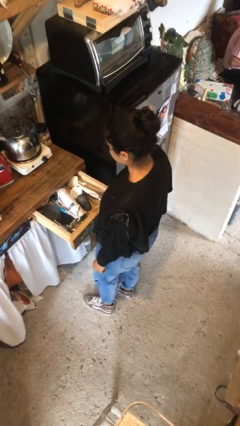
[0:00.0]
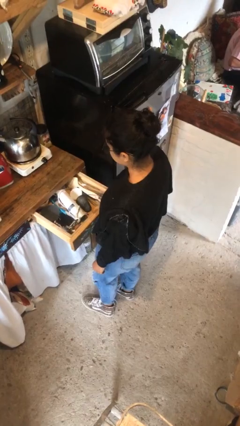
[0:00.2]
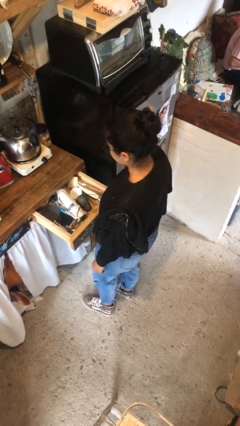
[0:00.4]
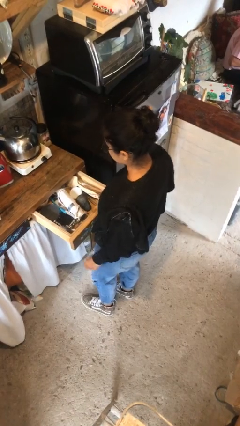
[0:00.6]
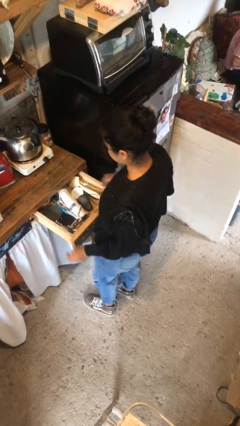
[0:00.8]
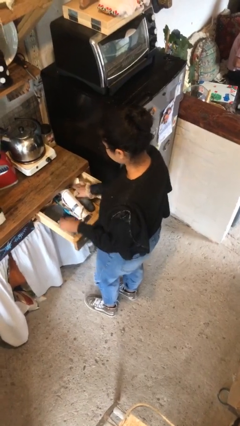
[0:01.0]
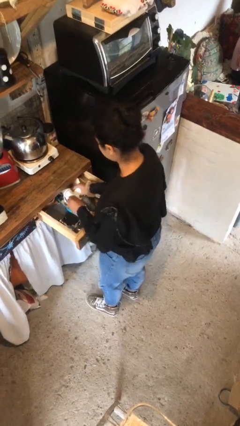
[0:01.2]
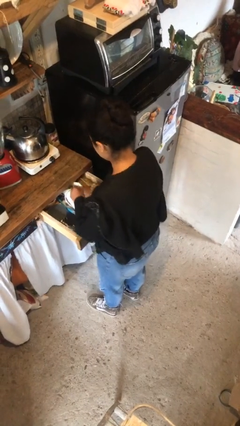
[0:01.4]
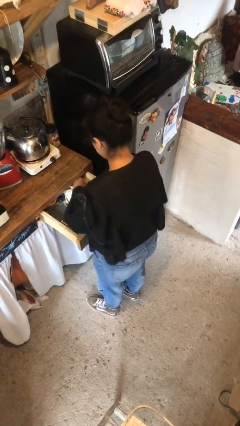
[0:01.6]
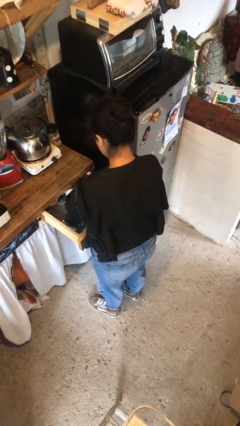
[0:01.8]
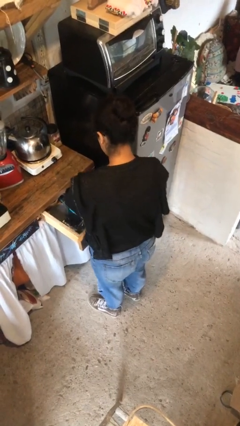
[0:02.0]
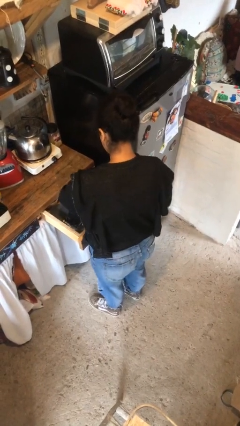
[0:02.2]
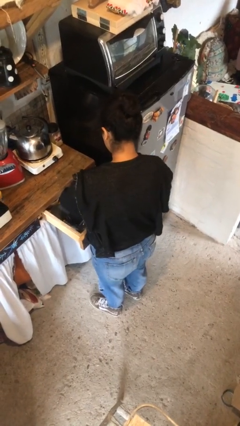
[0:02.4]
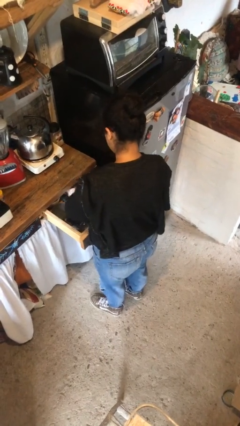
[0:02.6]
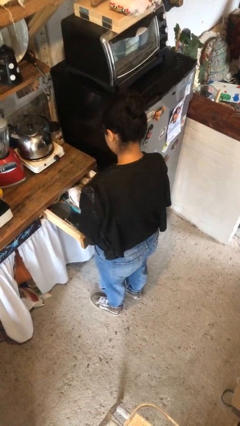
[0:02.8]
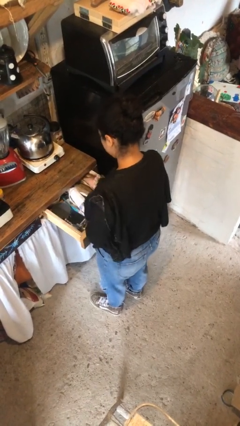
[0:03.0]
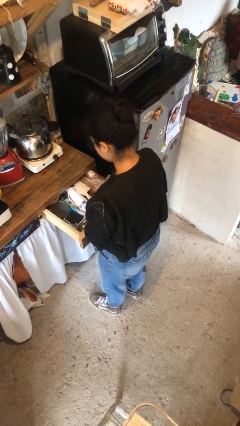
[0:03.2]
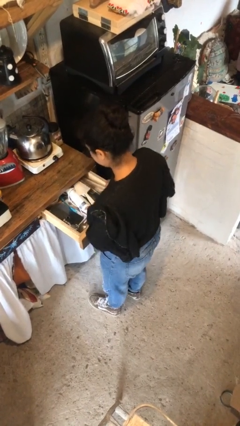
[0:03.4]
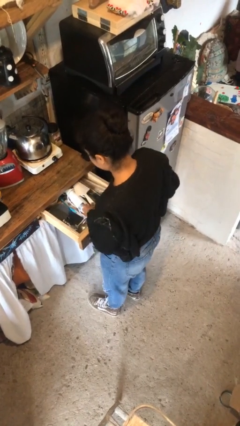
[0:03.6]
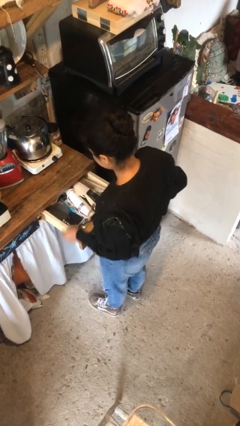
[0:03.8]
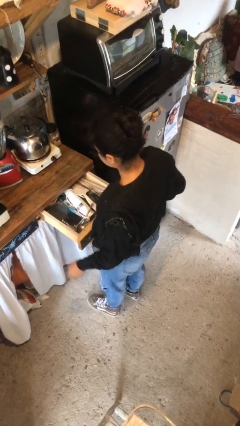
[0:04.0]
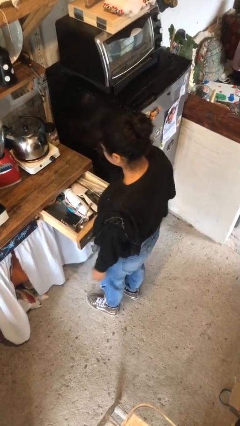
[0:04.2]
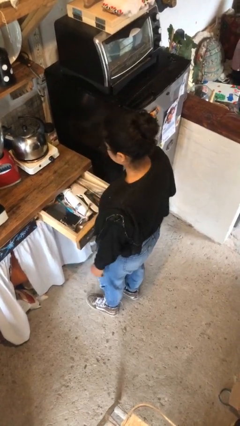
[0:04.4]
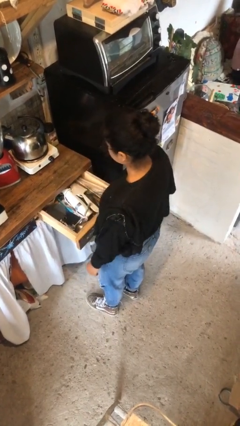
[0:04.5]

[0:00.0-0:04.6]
person searches in kitchen drawer

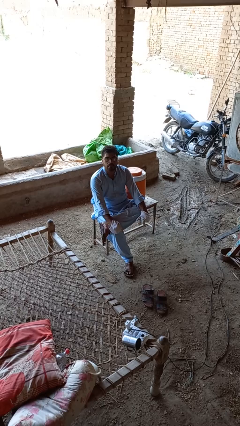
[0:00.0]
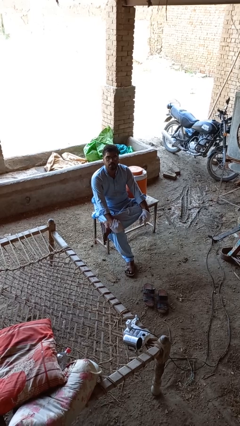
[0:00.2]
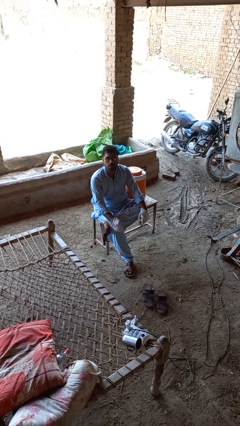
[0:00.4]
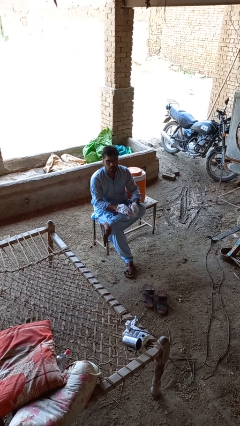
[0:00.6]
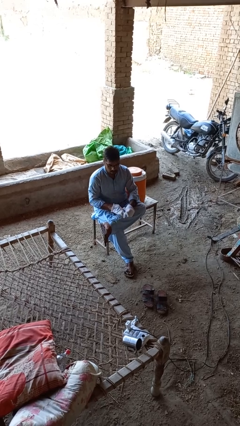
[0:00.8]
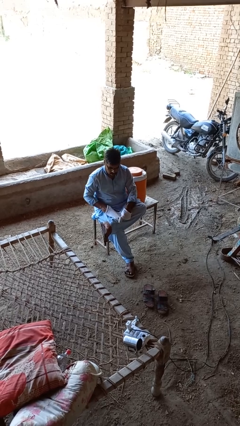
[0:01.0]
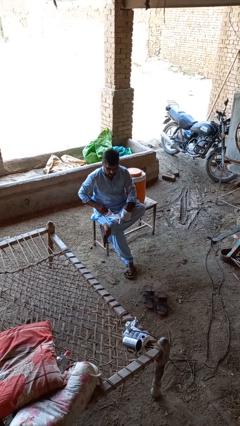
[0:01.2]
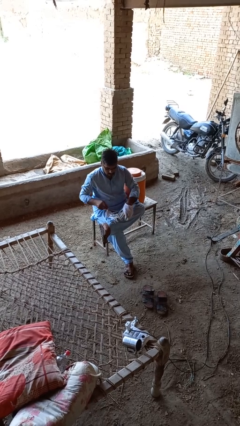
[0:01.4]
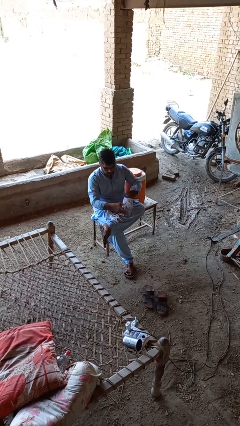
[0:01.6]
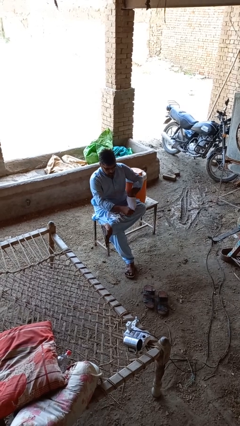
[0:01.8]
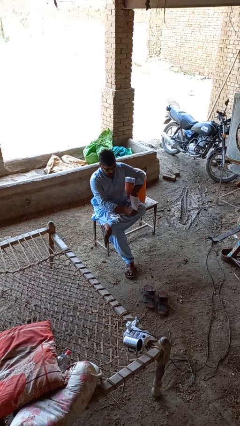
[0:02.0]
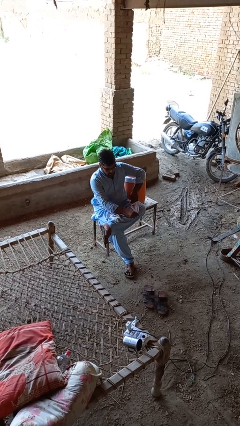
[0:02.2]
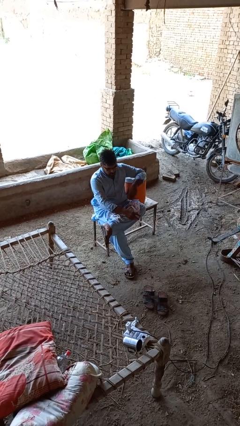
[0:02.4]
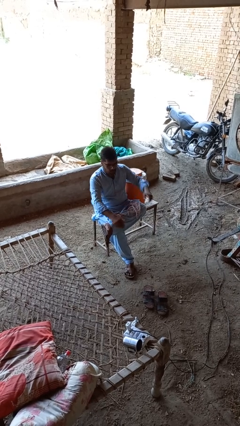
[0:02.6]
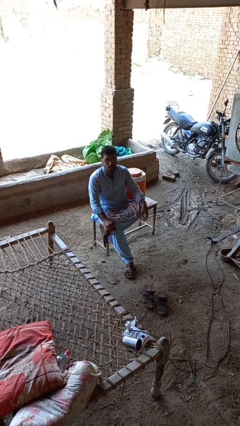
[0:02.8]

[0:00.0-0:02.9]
person takes off gloves

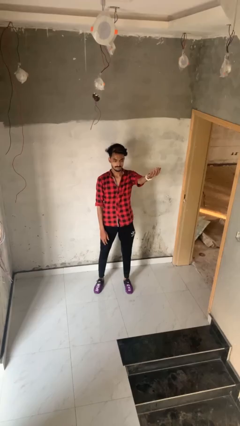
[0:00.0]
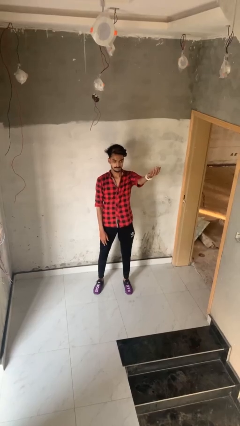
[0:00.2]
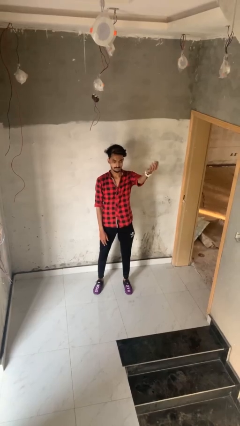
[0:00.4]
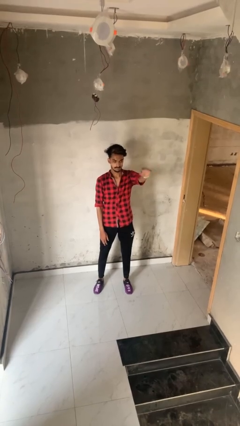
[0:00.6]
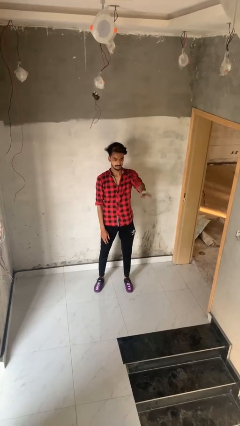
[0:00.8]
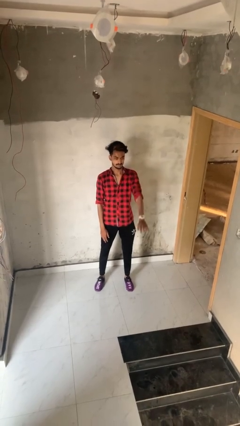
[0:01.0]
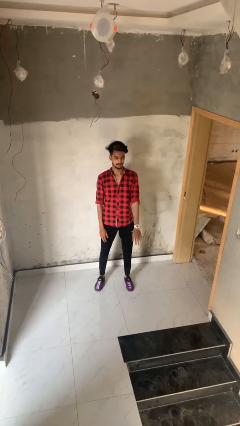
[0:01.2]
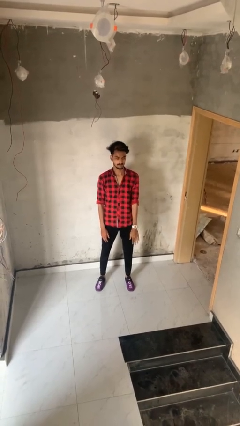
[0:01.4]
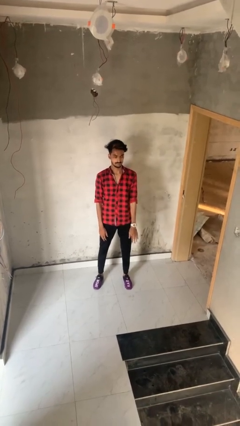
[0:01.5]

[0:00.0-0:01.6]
person gestures swipe down

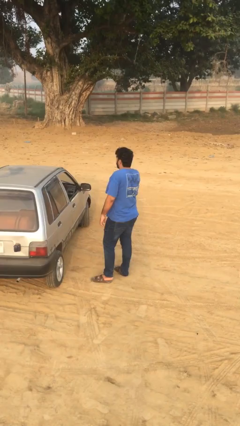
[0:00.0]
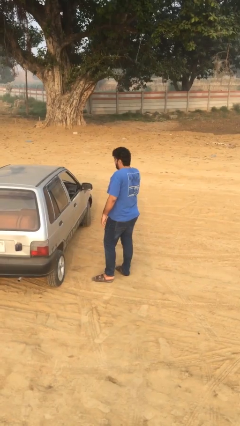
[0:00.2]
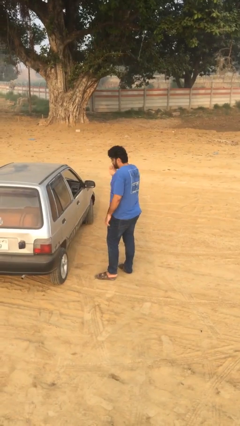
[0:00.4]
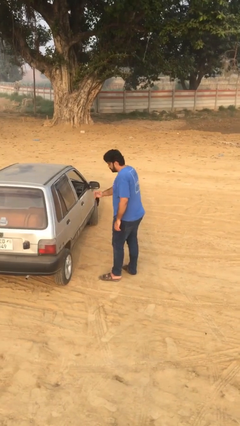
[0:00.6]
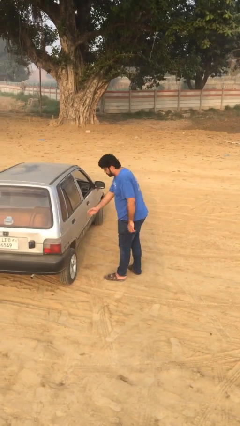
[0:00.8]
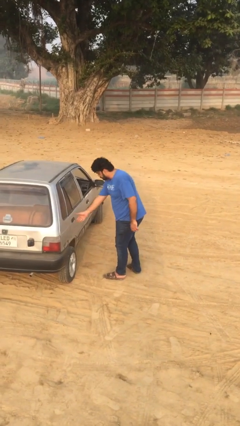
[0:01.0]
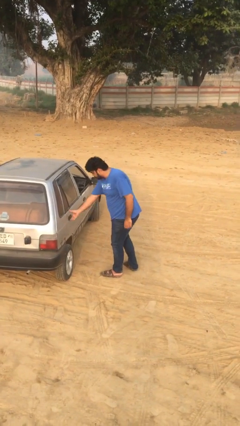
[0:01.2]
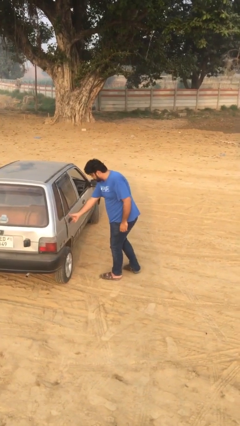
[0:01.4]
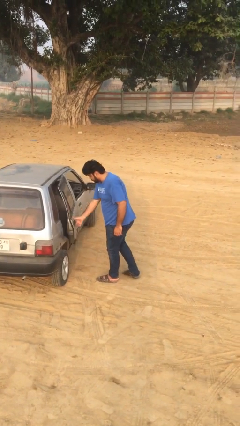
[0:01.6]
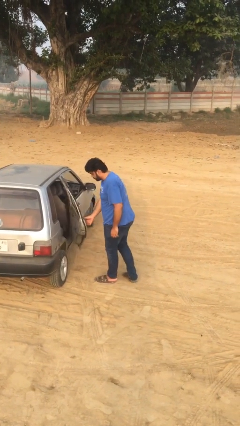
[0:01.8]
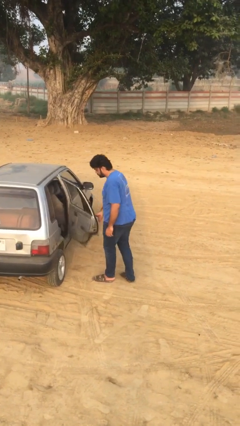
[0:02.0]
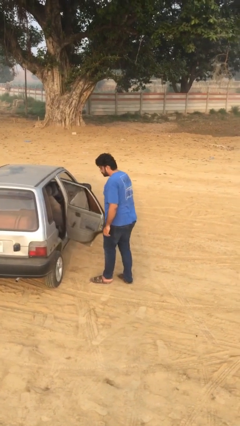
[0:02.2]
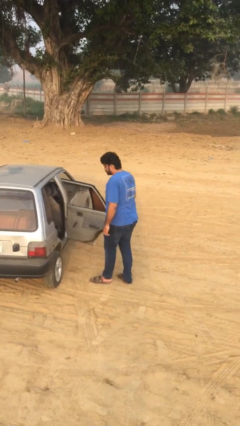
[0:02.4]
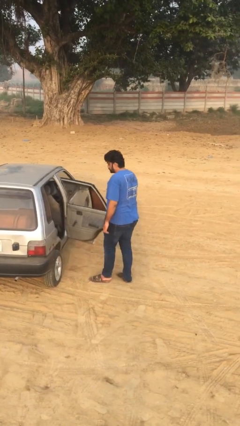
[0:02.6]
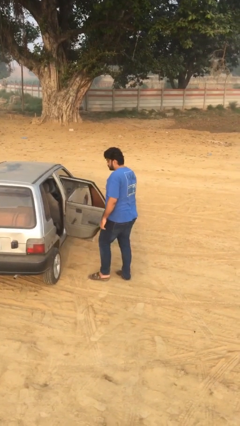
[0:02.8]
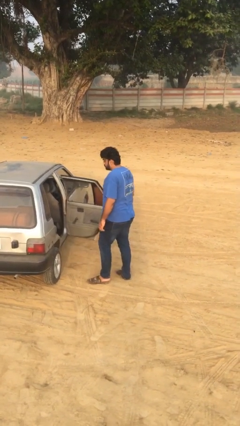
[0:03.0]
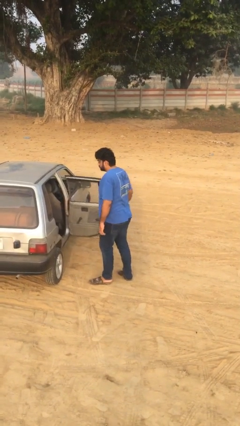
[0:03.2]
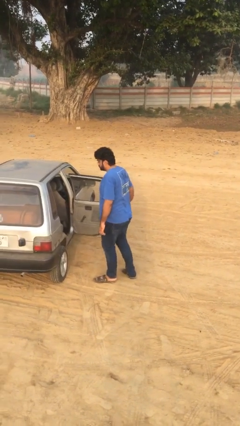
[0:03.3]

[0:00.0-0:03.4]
person opens car door

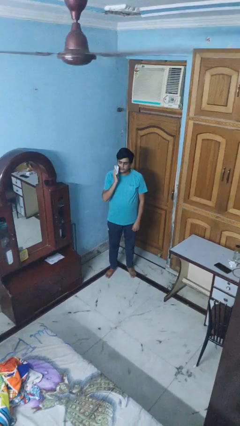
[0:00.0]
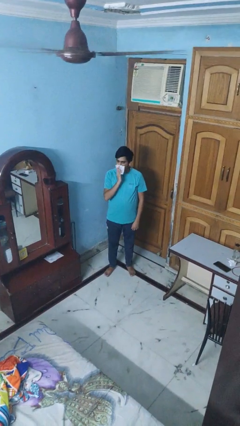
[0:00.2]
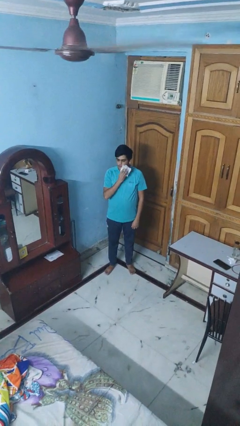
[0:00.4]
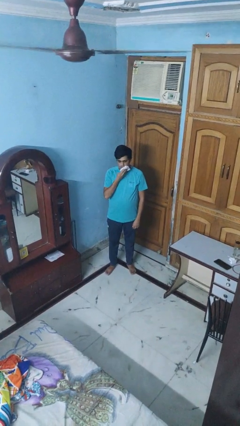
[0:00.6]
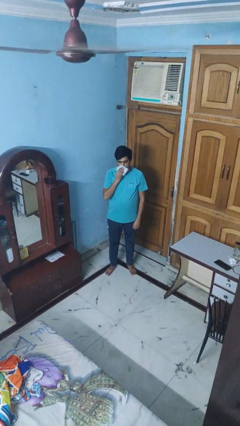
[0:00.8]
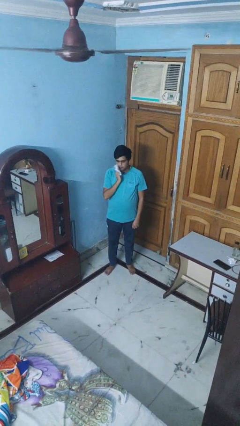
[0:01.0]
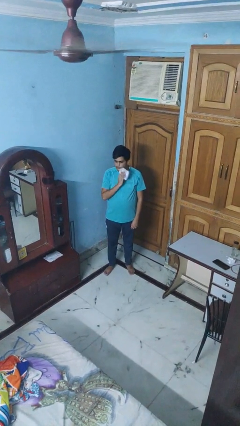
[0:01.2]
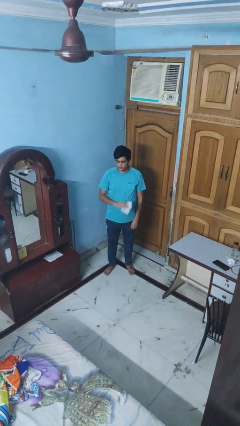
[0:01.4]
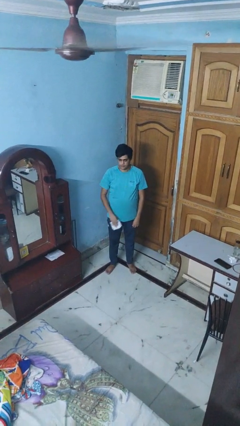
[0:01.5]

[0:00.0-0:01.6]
person wipes mouth with napkin

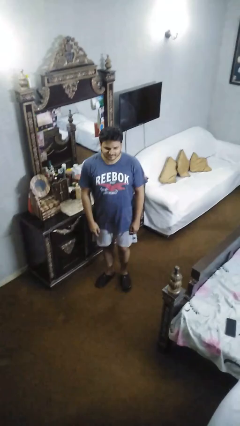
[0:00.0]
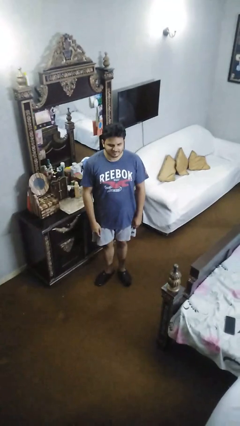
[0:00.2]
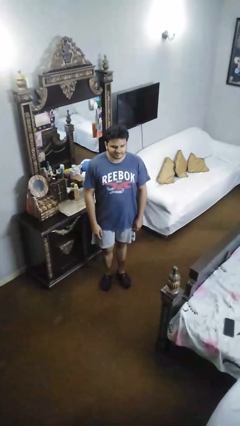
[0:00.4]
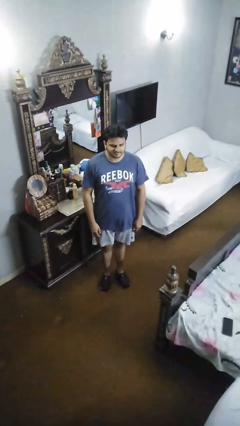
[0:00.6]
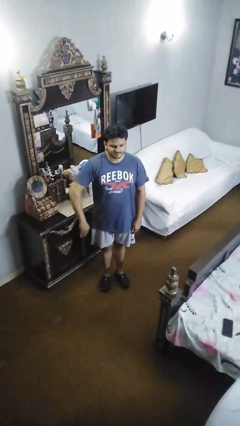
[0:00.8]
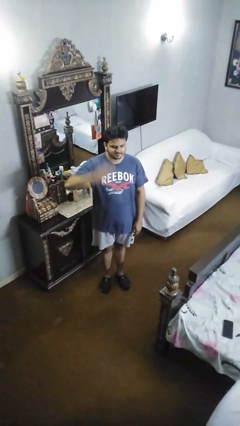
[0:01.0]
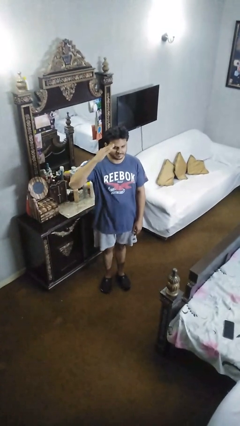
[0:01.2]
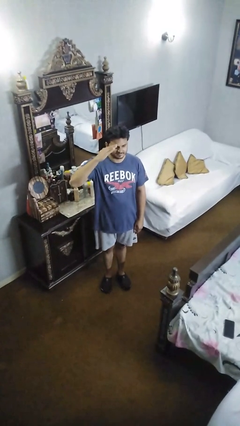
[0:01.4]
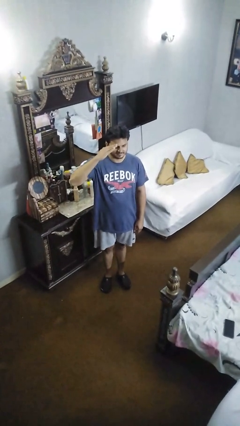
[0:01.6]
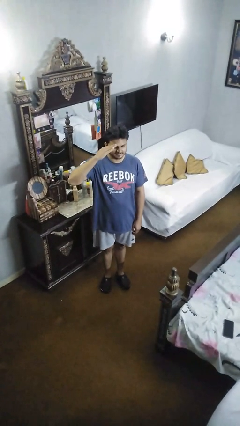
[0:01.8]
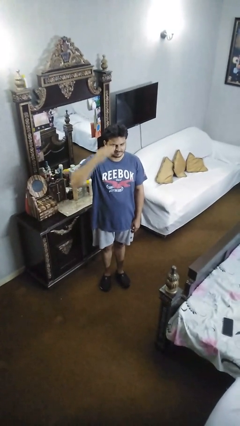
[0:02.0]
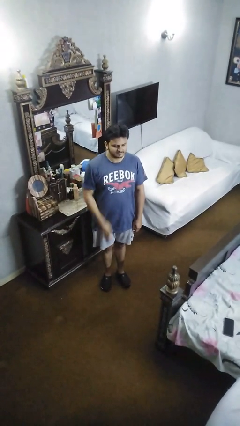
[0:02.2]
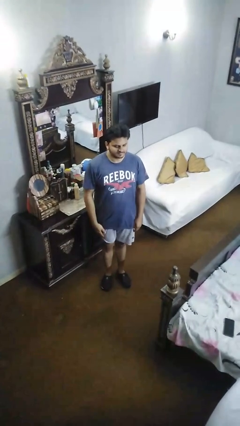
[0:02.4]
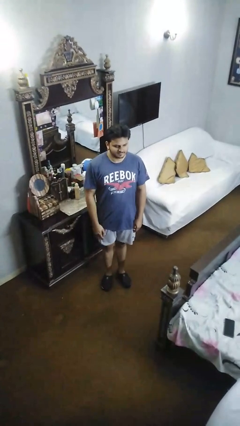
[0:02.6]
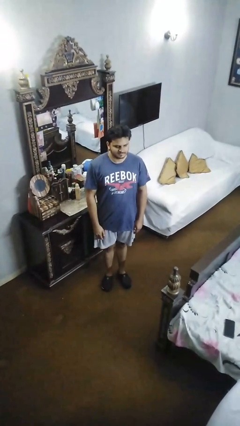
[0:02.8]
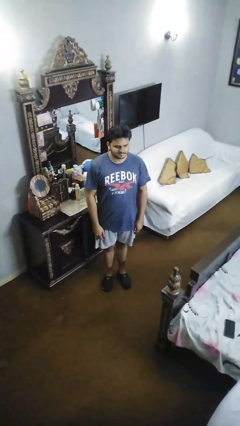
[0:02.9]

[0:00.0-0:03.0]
person salutes

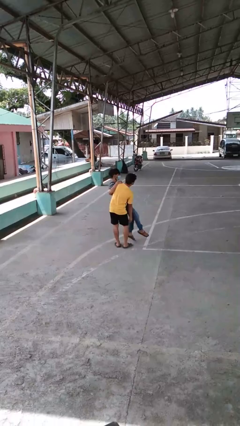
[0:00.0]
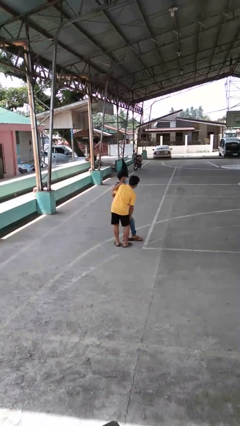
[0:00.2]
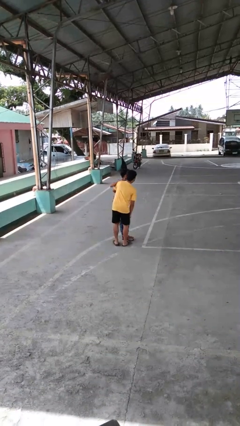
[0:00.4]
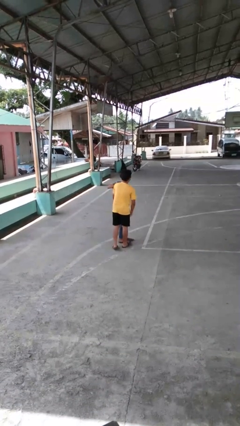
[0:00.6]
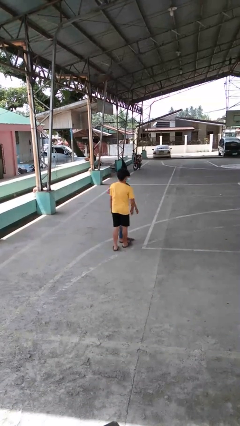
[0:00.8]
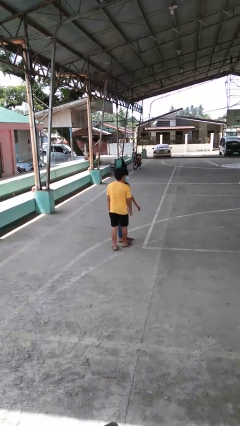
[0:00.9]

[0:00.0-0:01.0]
person puts down person
